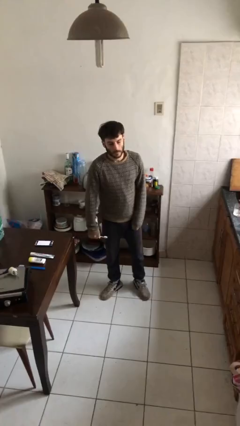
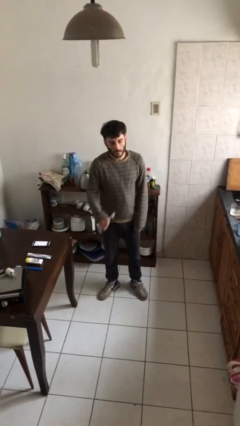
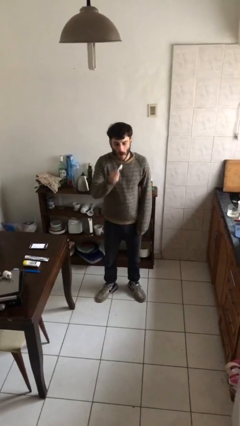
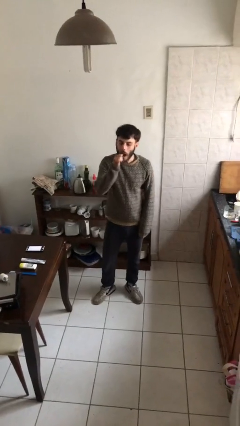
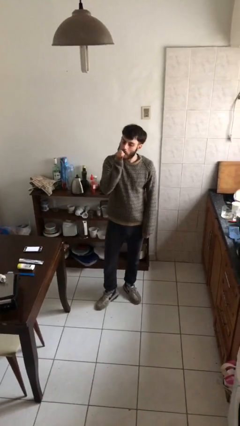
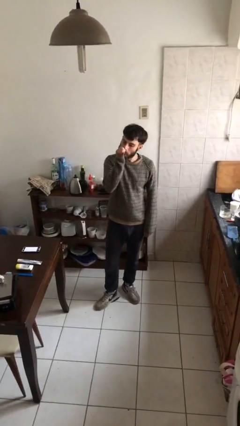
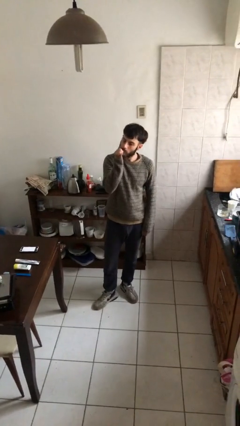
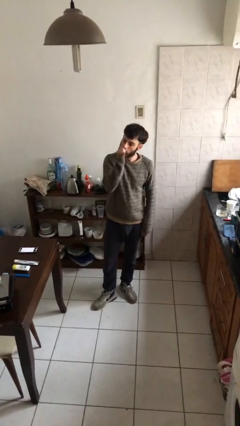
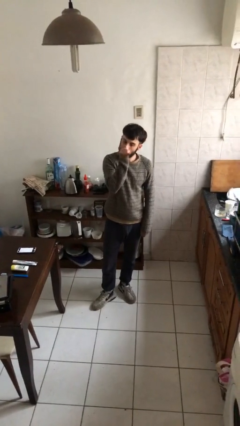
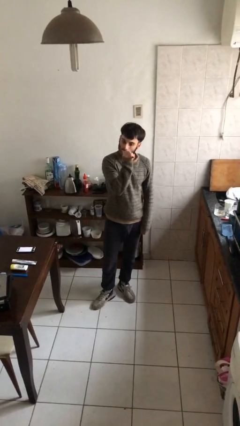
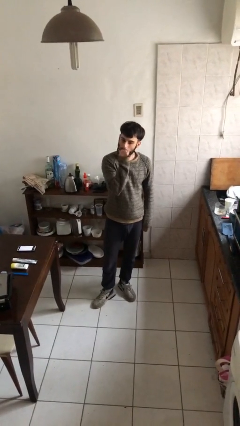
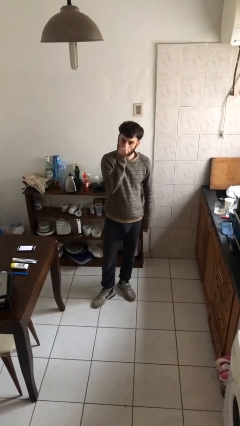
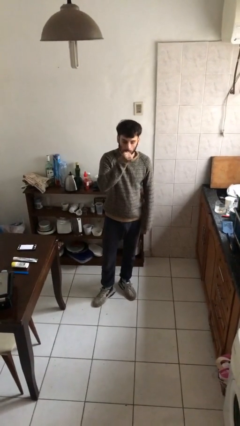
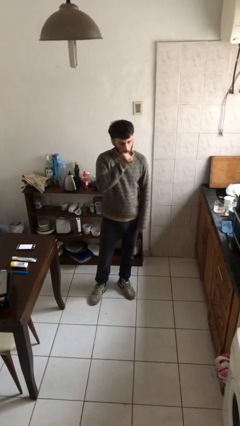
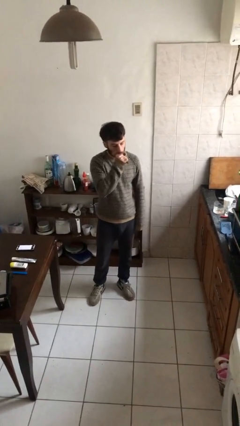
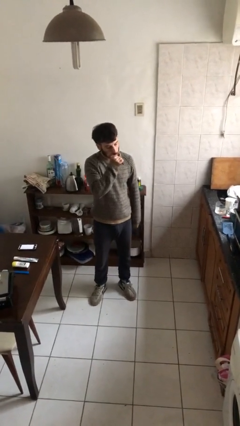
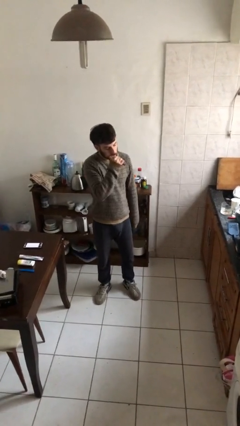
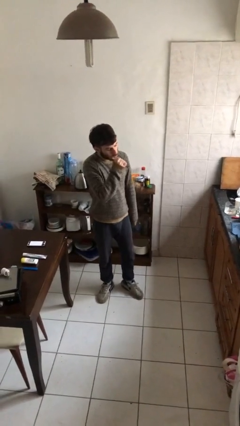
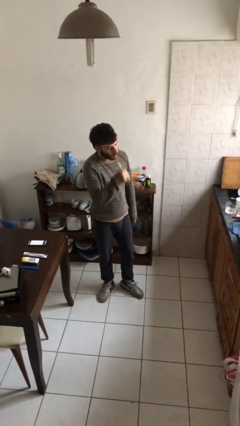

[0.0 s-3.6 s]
person brushes teeth

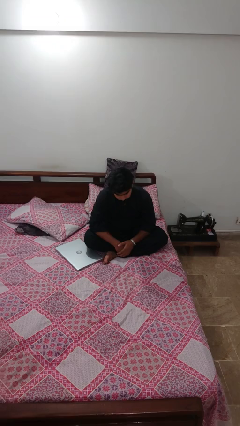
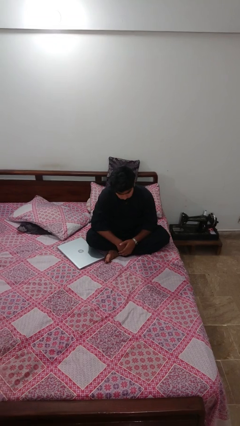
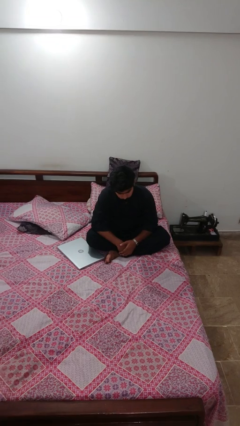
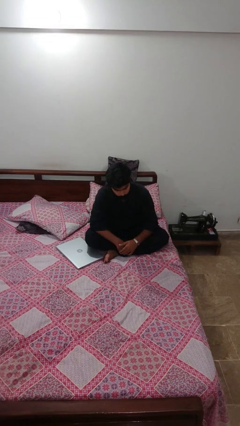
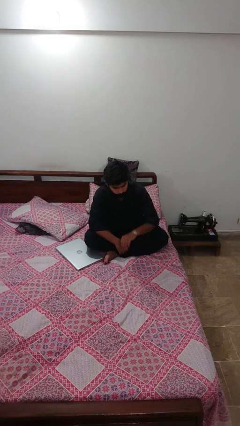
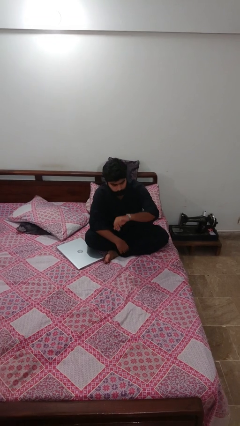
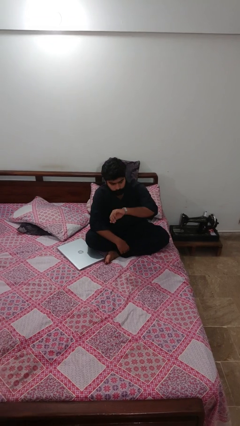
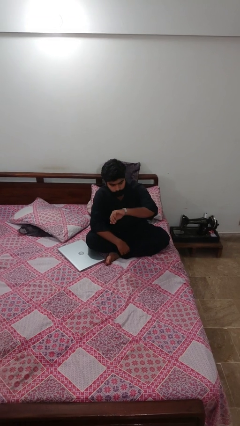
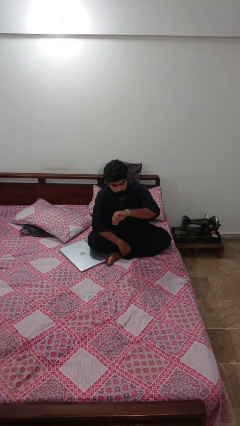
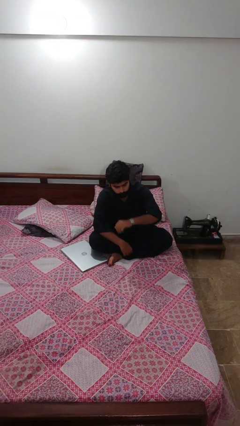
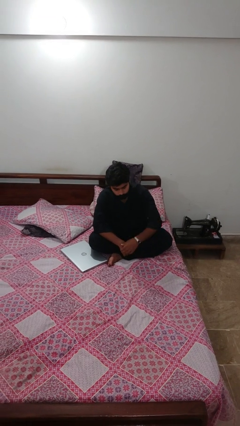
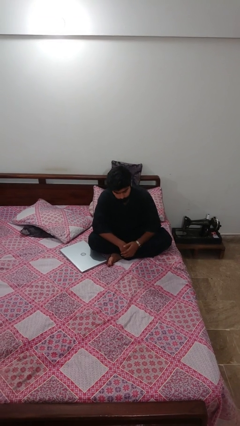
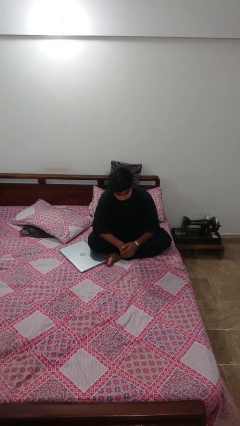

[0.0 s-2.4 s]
person looks at wristwatch

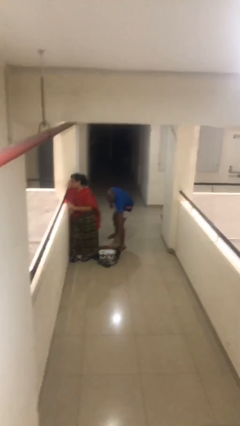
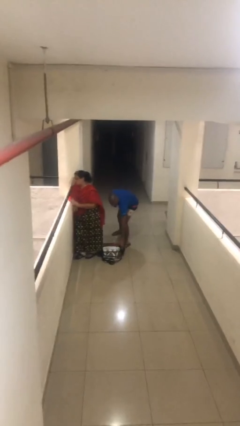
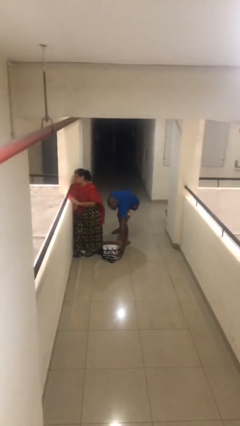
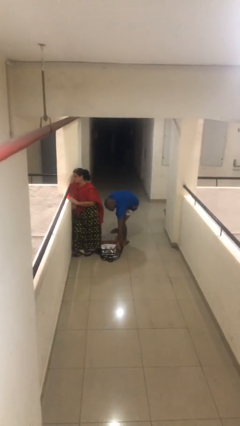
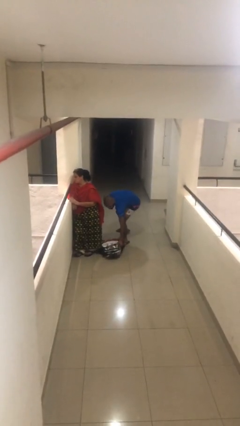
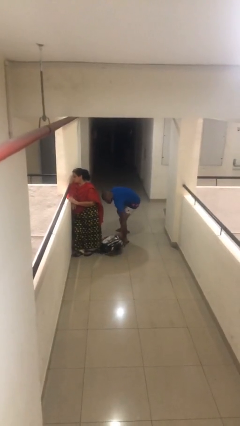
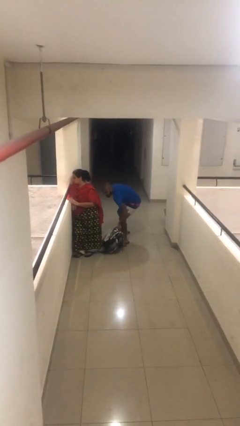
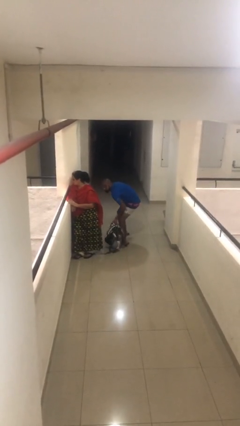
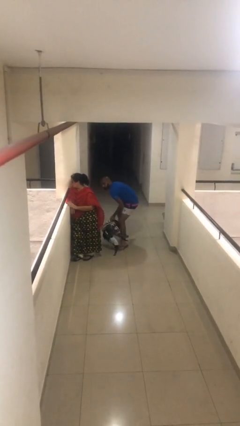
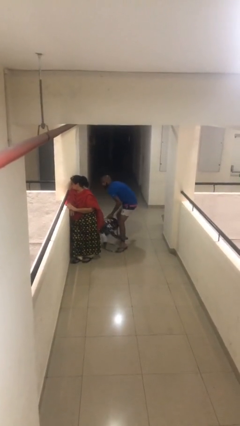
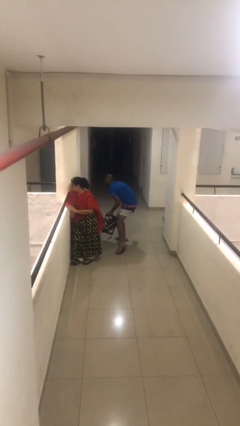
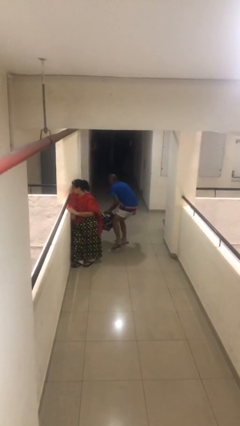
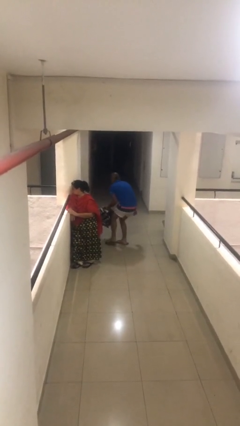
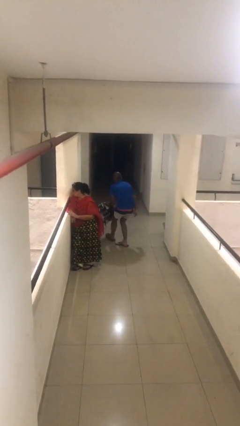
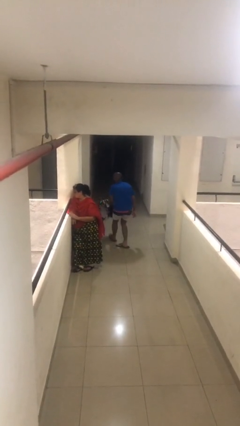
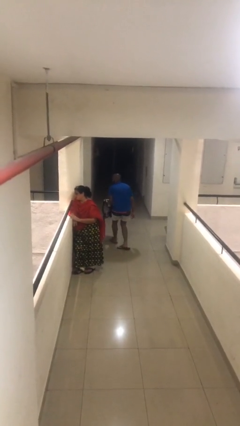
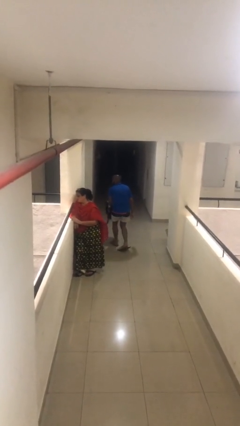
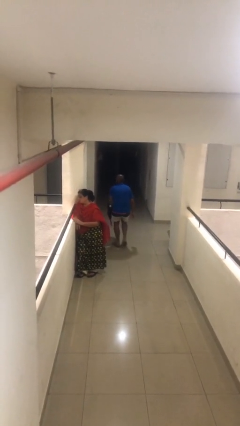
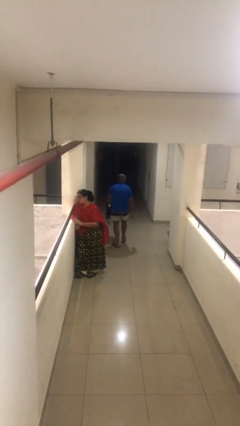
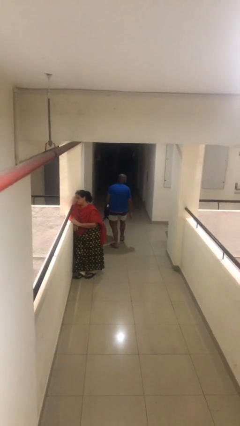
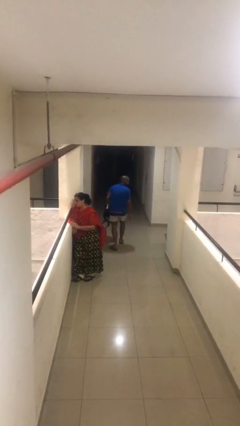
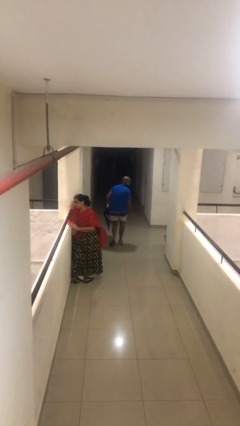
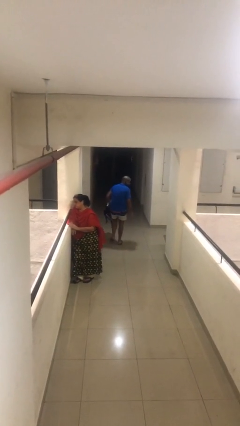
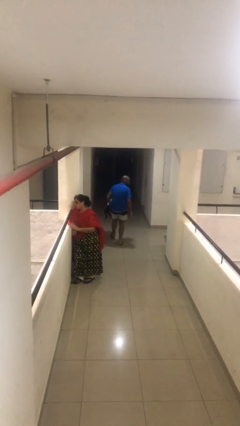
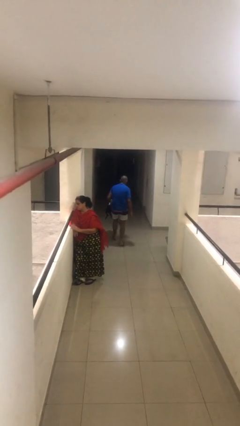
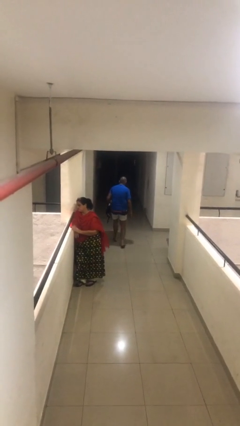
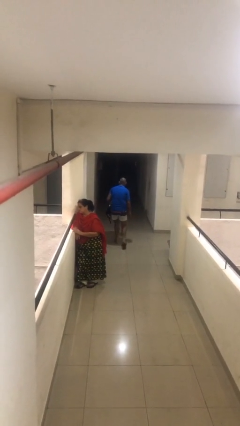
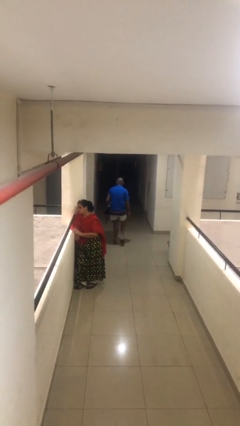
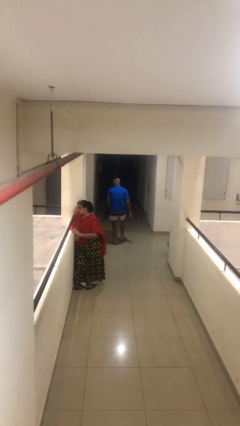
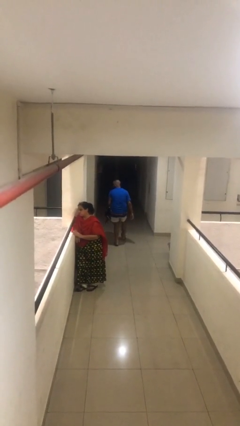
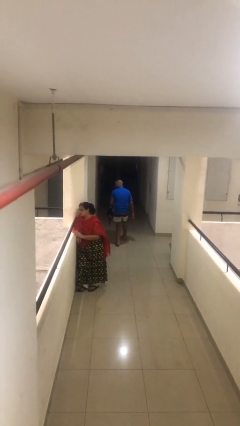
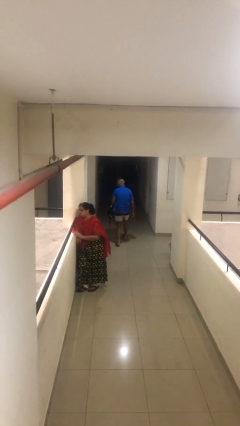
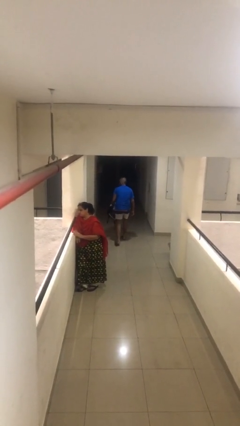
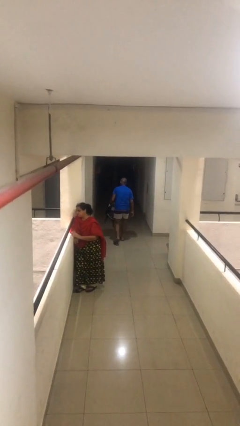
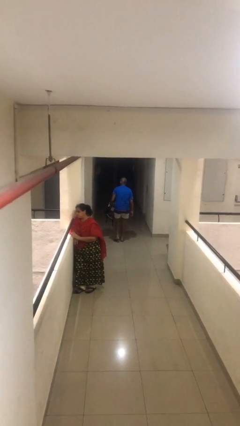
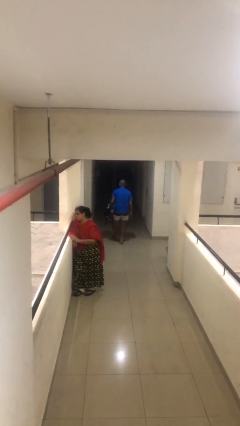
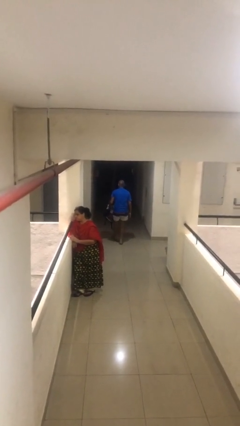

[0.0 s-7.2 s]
person steals object from person

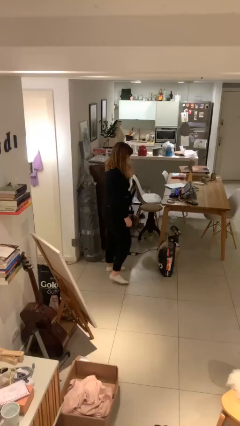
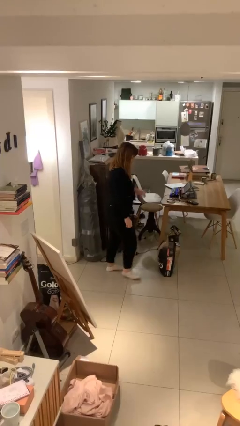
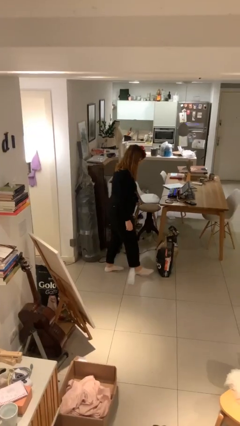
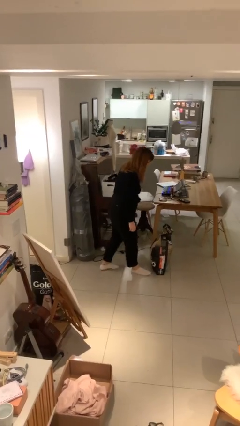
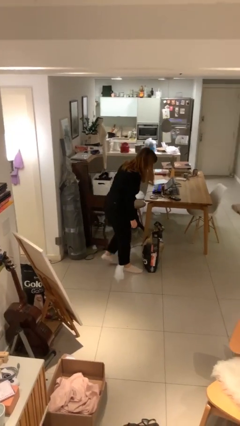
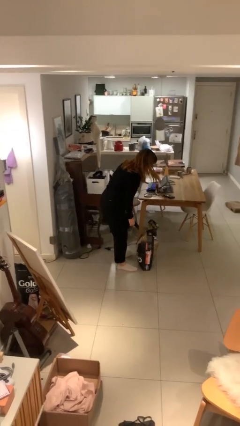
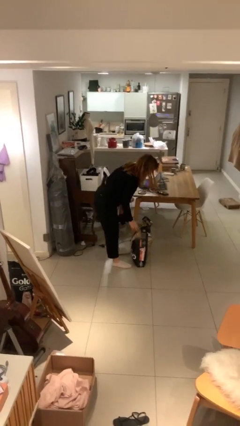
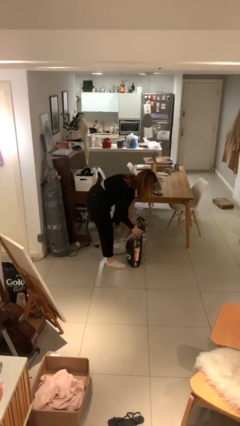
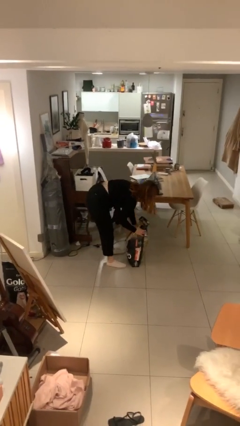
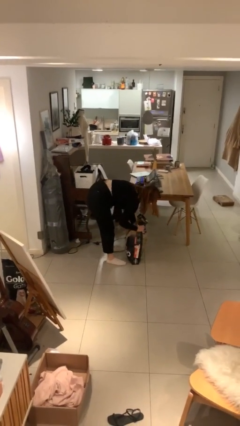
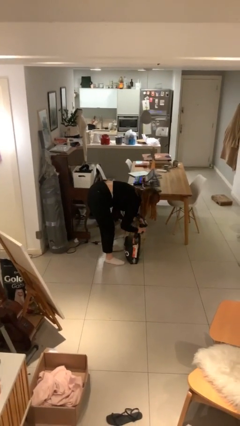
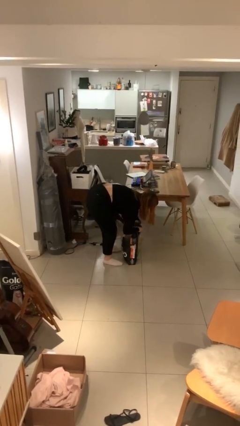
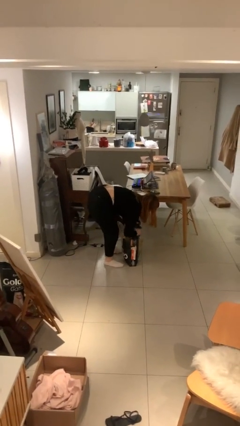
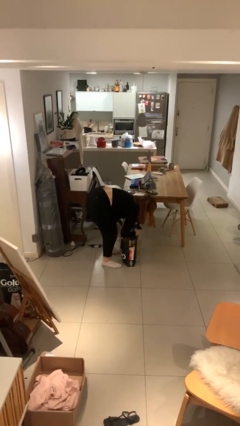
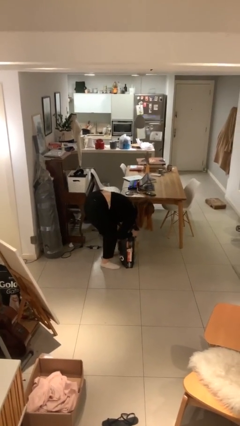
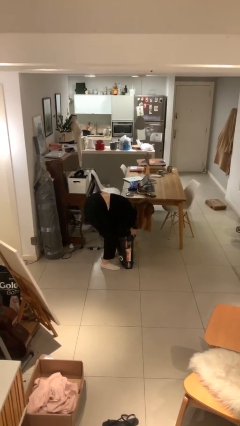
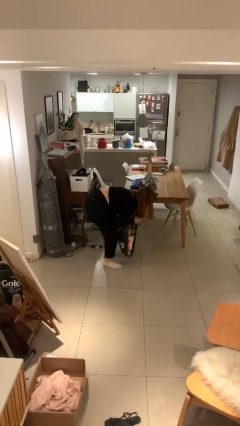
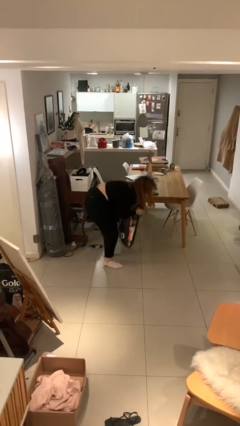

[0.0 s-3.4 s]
person picks up object from floor

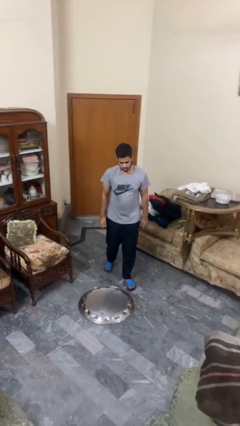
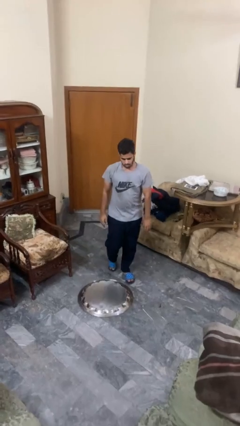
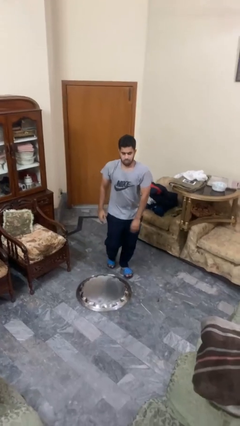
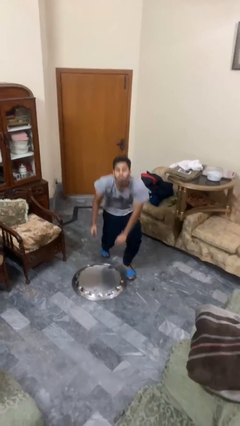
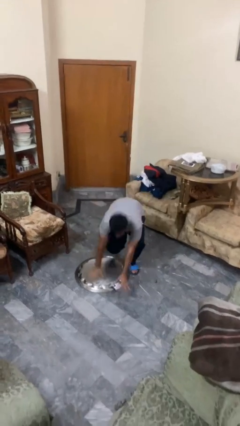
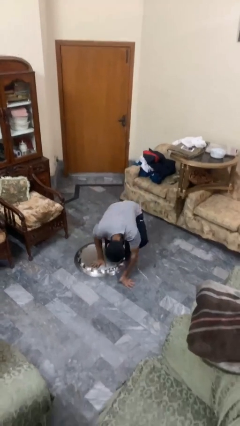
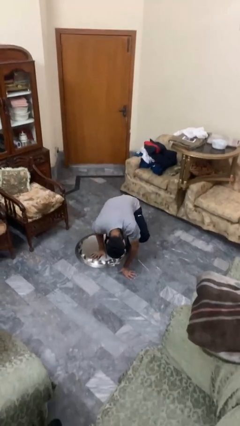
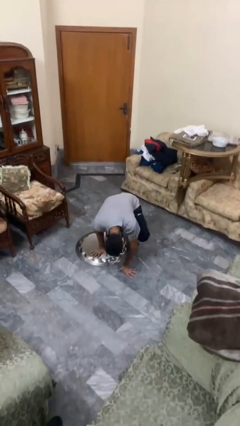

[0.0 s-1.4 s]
person trips on object on floor
